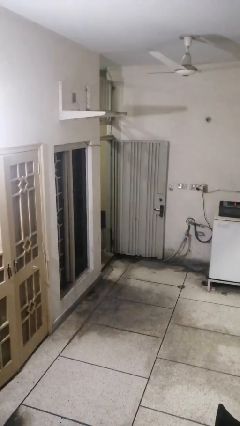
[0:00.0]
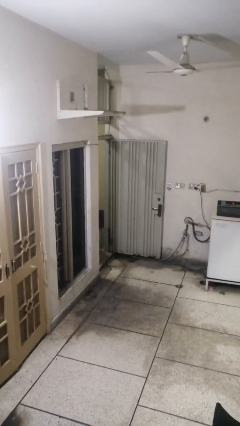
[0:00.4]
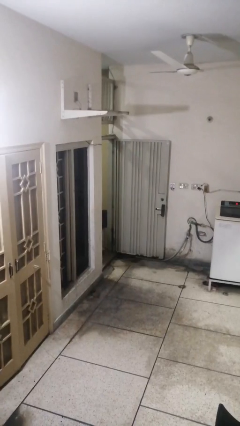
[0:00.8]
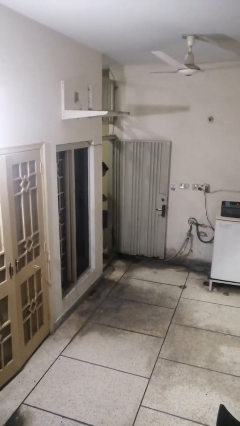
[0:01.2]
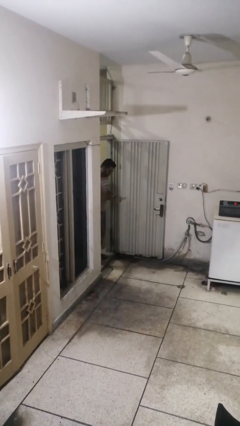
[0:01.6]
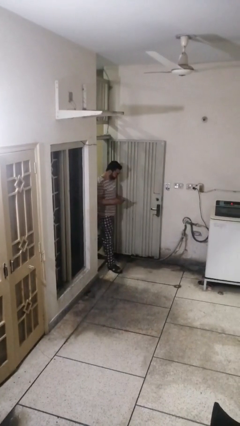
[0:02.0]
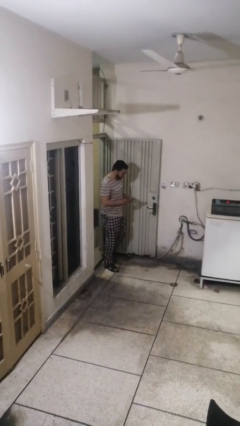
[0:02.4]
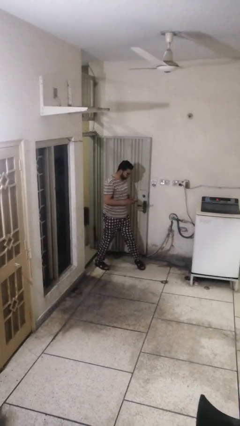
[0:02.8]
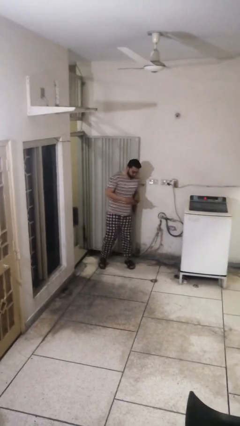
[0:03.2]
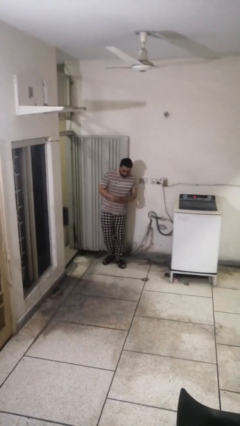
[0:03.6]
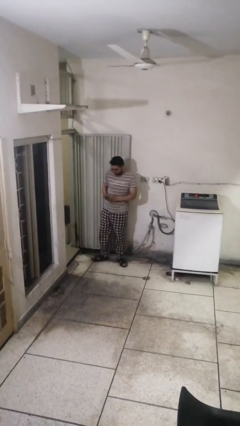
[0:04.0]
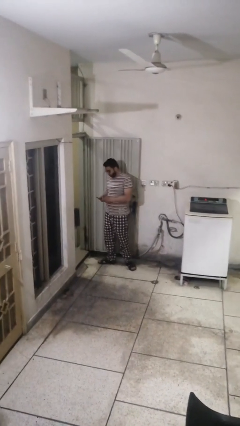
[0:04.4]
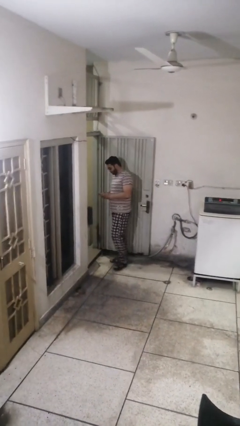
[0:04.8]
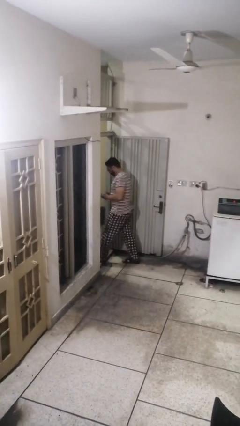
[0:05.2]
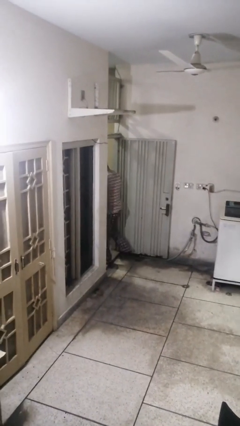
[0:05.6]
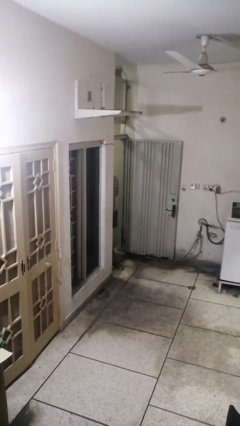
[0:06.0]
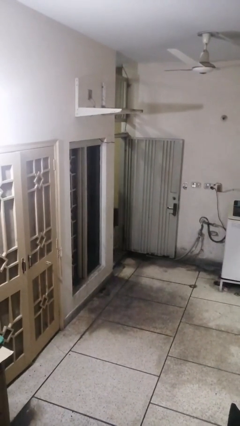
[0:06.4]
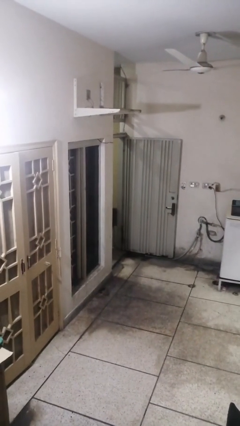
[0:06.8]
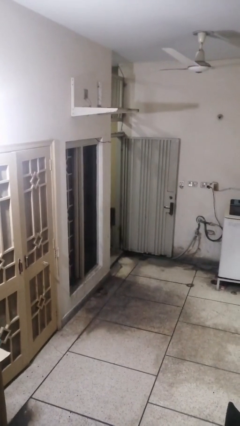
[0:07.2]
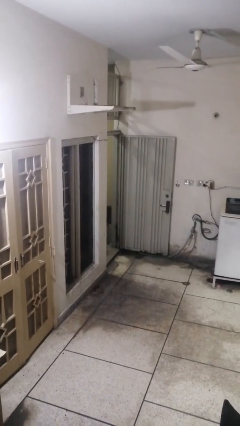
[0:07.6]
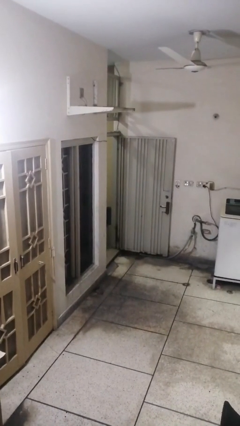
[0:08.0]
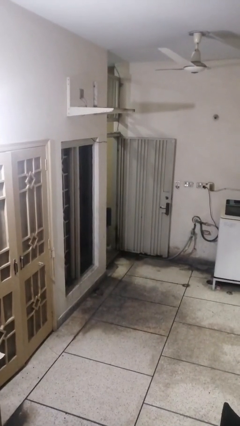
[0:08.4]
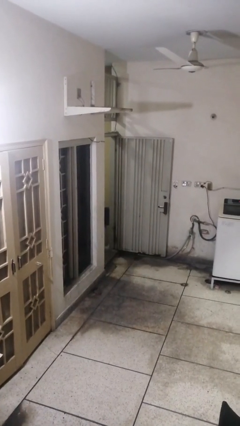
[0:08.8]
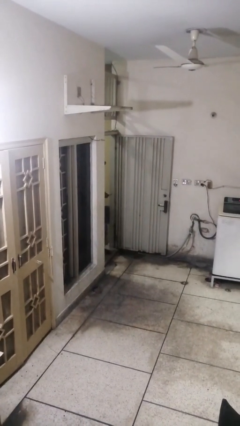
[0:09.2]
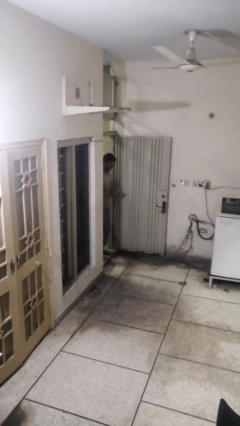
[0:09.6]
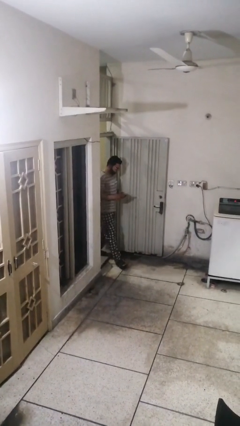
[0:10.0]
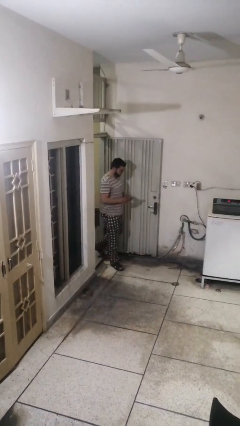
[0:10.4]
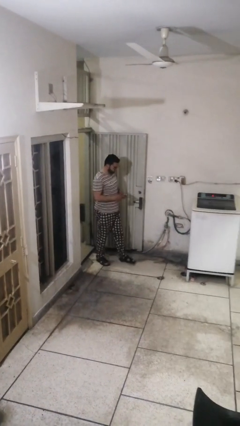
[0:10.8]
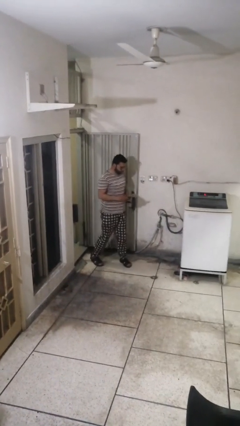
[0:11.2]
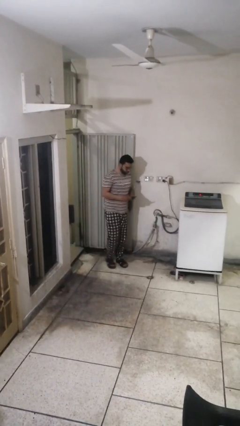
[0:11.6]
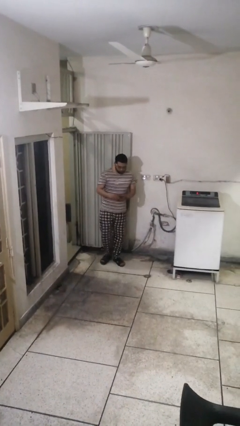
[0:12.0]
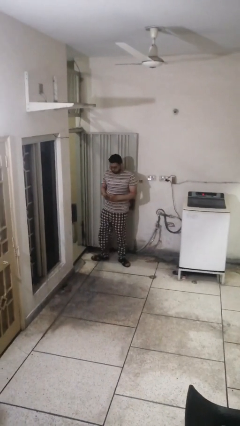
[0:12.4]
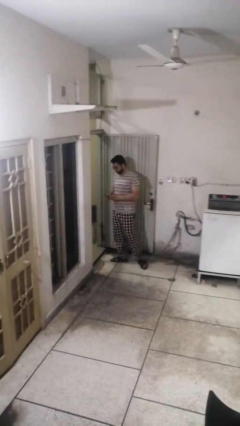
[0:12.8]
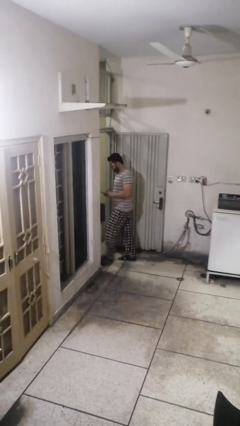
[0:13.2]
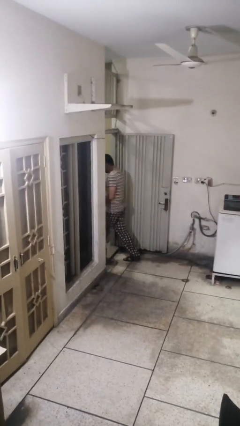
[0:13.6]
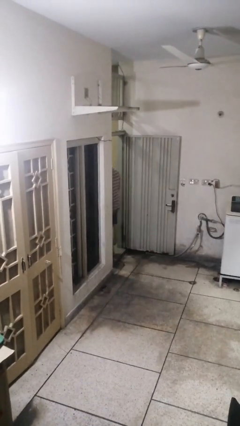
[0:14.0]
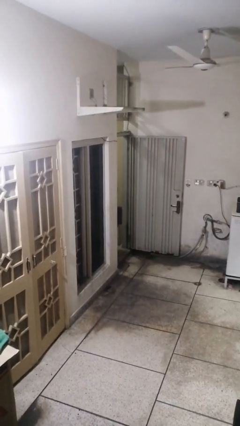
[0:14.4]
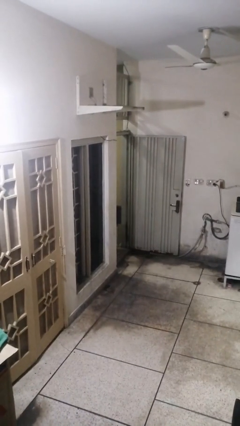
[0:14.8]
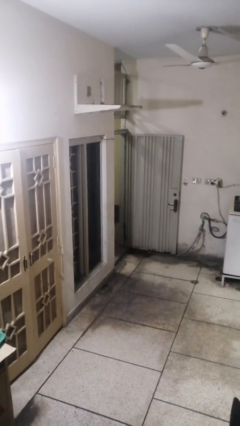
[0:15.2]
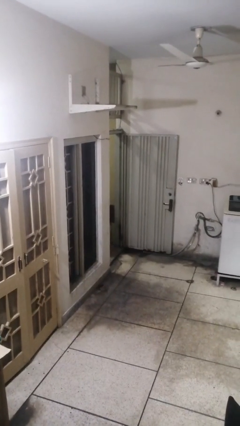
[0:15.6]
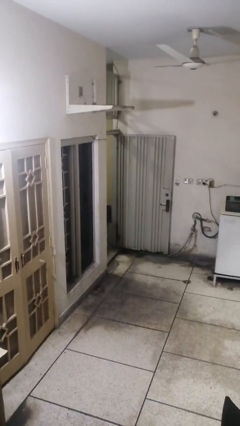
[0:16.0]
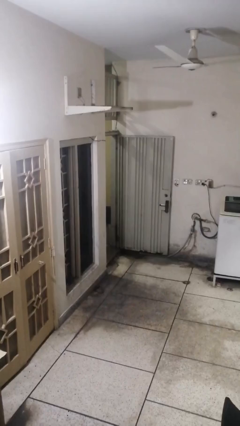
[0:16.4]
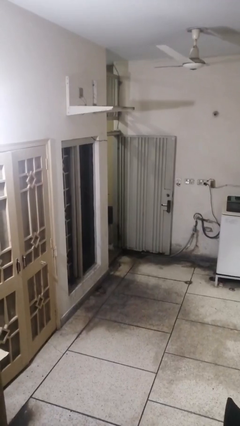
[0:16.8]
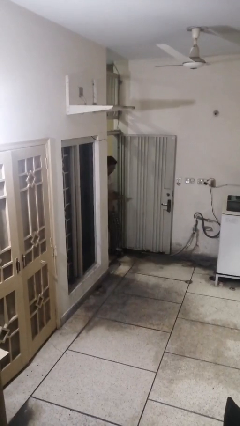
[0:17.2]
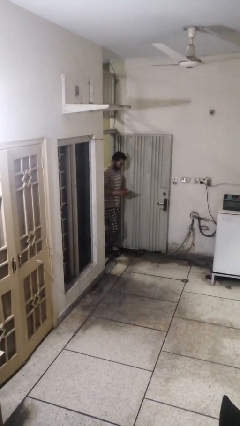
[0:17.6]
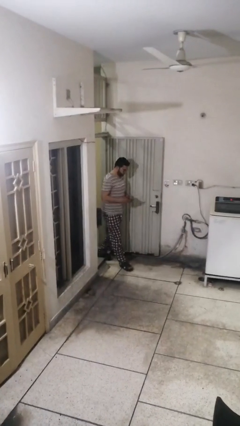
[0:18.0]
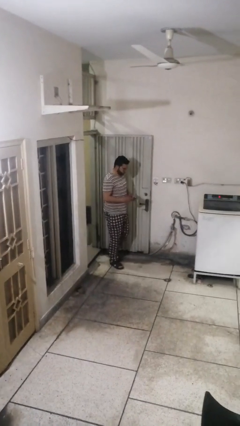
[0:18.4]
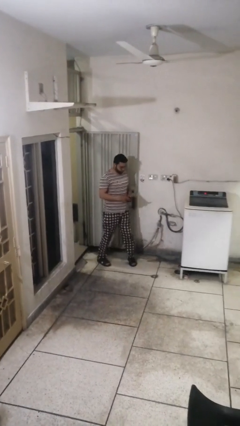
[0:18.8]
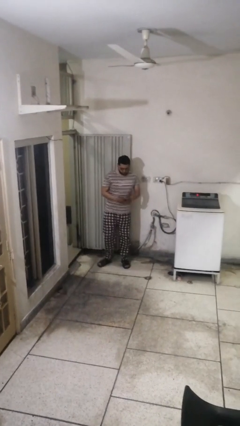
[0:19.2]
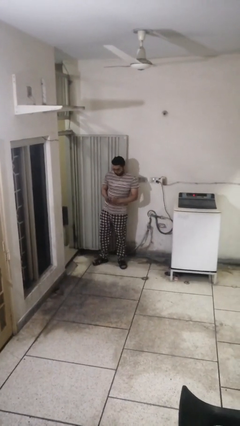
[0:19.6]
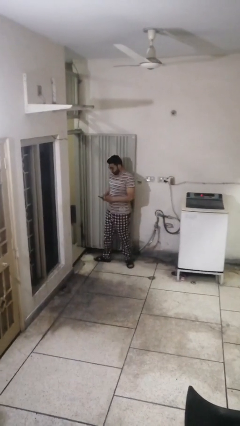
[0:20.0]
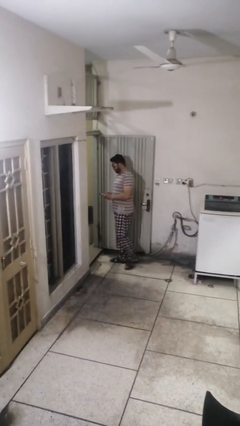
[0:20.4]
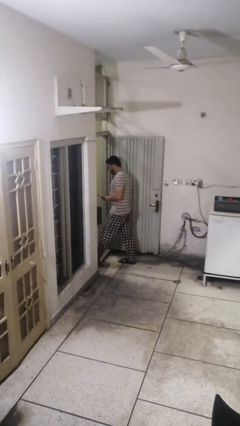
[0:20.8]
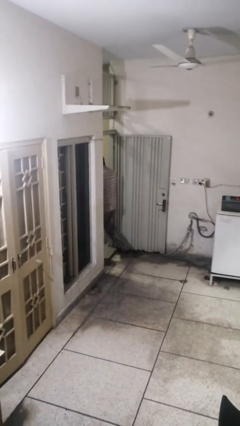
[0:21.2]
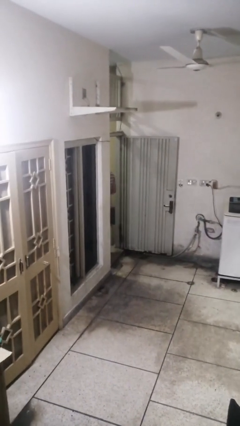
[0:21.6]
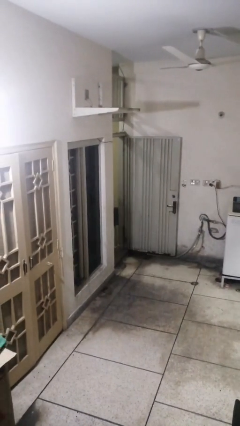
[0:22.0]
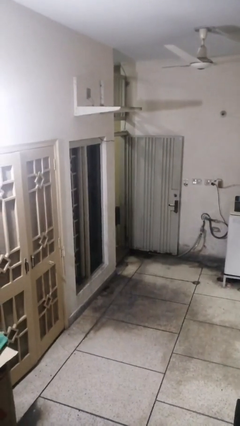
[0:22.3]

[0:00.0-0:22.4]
person texts on phone

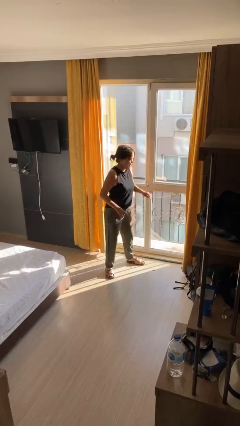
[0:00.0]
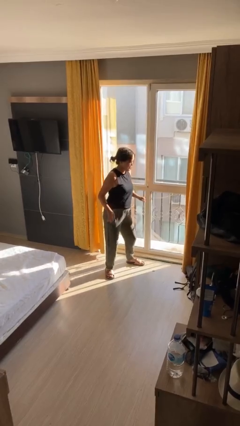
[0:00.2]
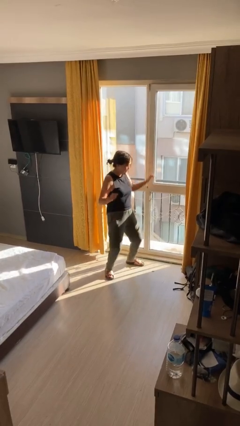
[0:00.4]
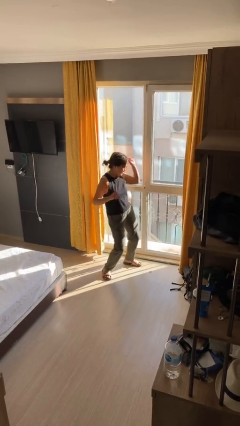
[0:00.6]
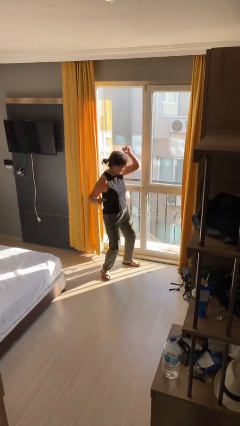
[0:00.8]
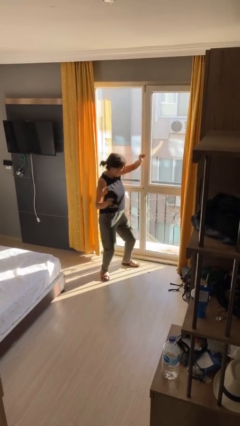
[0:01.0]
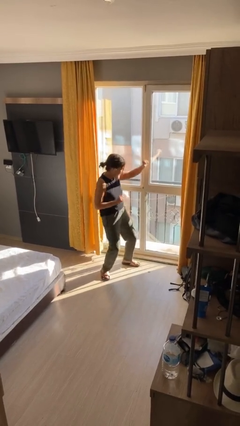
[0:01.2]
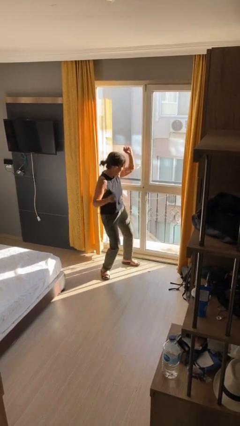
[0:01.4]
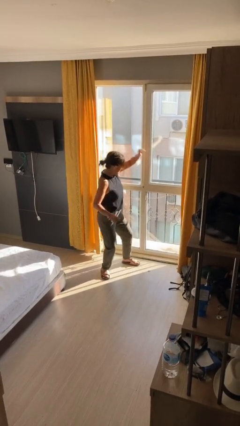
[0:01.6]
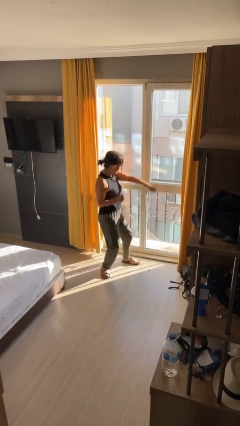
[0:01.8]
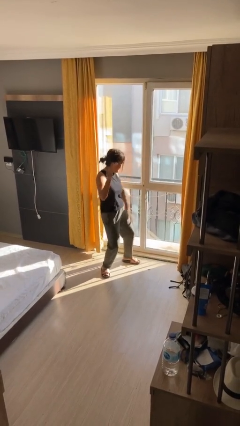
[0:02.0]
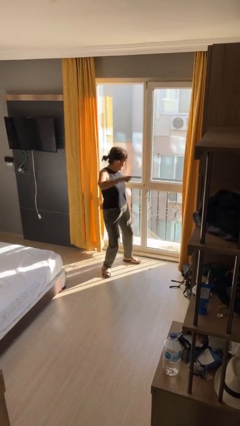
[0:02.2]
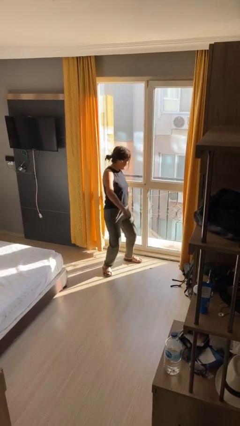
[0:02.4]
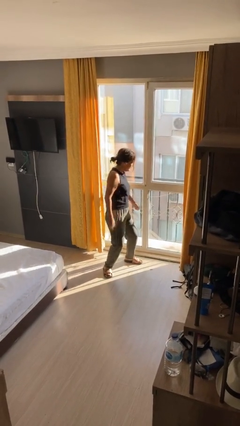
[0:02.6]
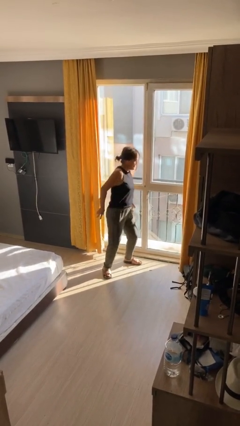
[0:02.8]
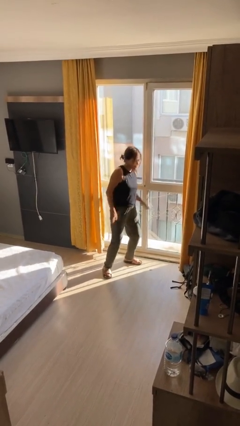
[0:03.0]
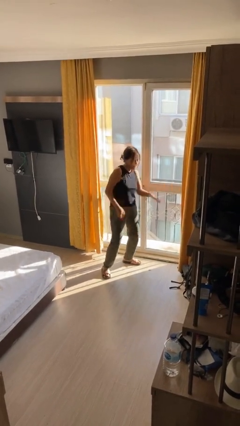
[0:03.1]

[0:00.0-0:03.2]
person dances in place

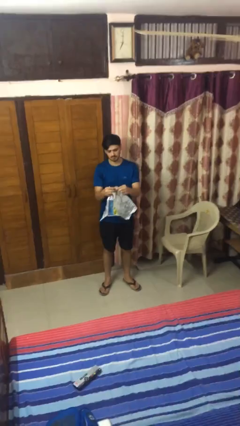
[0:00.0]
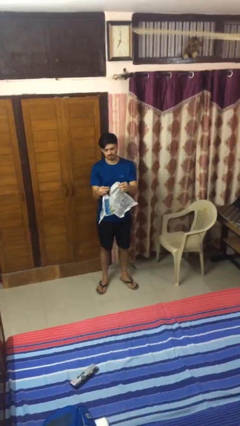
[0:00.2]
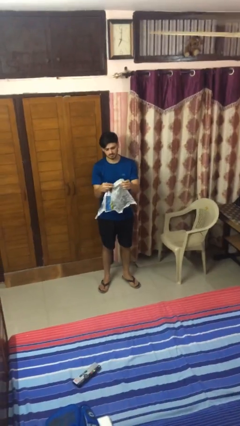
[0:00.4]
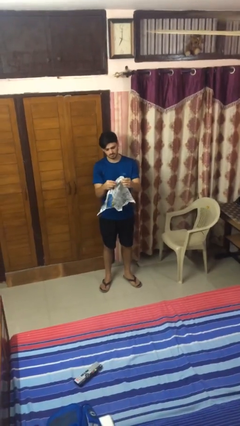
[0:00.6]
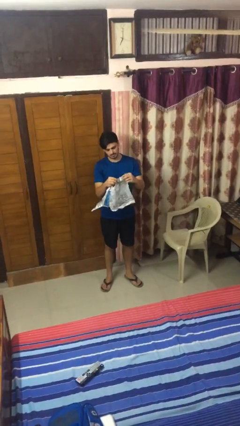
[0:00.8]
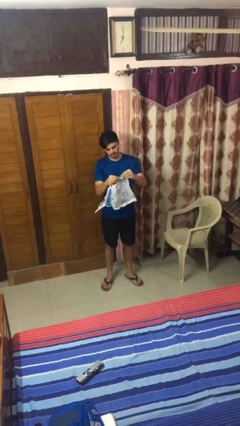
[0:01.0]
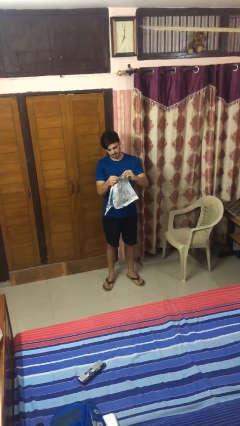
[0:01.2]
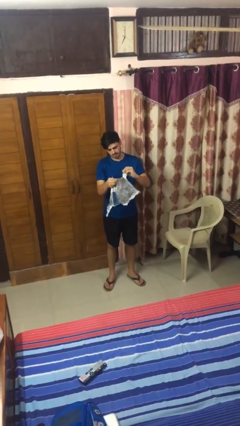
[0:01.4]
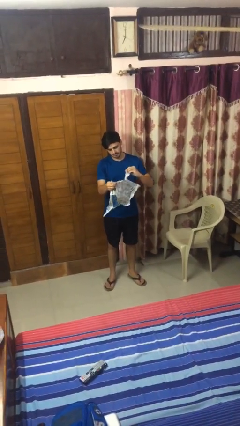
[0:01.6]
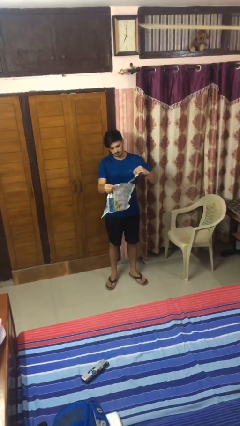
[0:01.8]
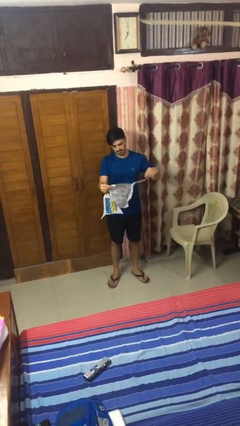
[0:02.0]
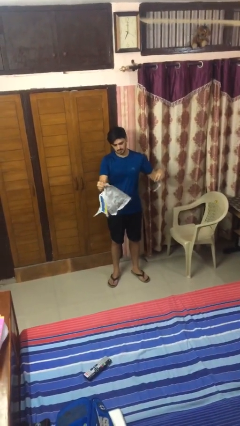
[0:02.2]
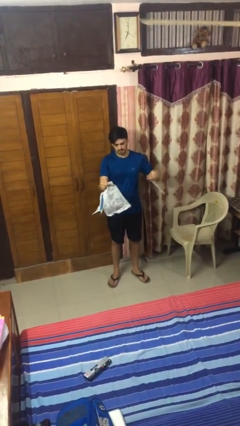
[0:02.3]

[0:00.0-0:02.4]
person tears paper

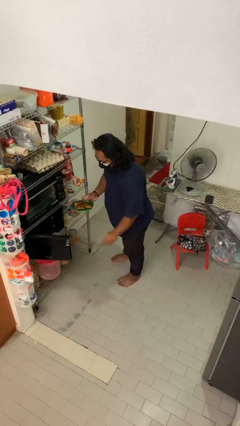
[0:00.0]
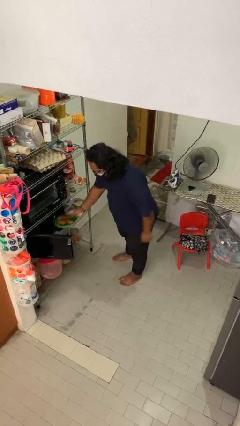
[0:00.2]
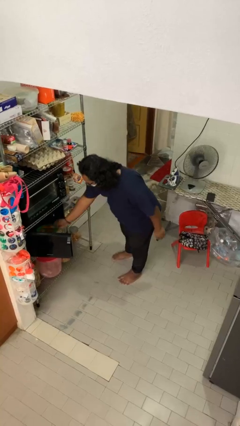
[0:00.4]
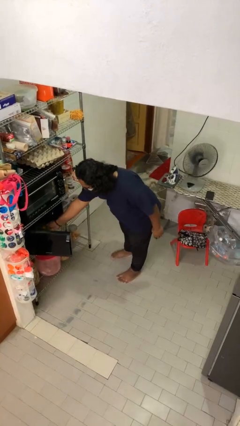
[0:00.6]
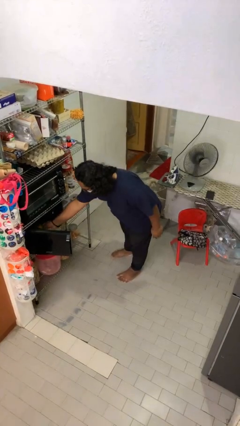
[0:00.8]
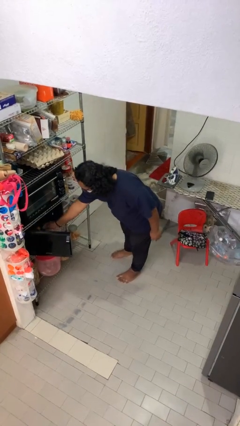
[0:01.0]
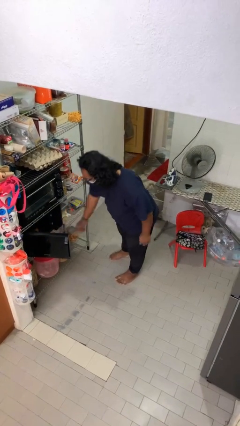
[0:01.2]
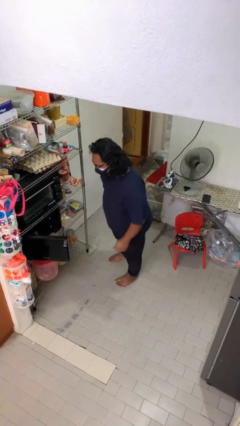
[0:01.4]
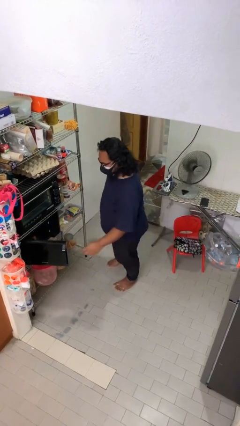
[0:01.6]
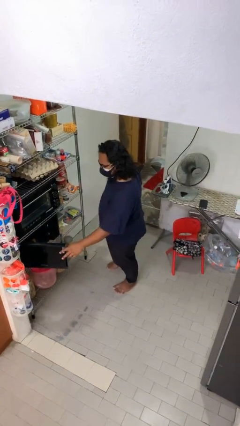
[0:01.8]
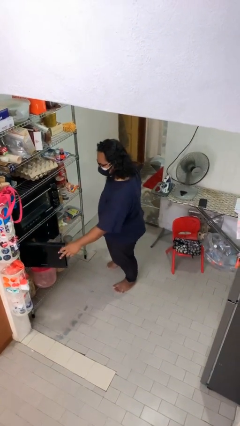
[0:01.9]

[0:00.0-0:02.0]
person puts object into microwave
